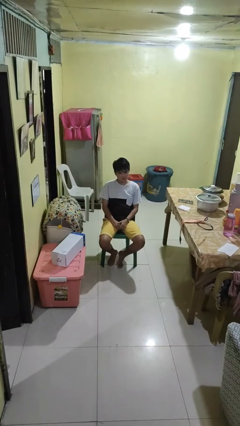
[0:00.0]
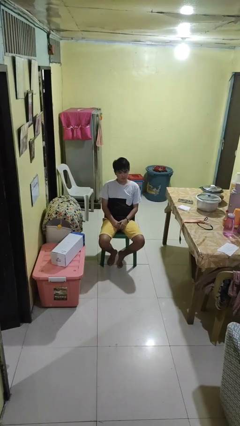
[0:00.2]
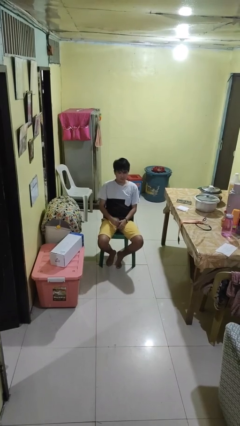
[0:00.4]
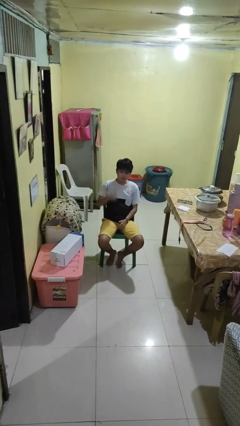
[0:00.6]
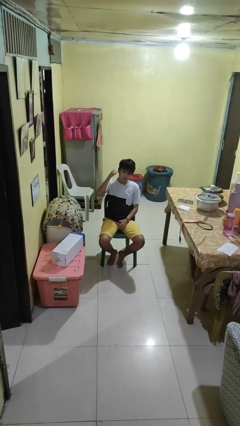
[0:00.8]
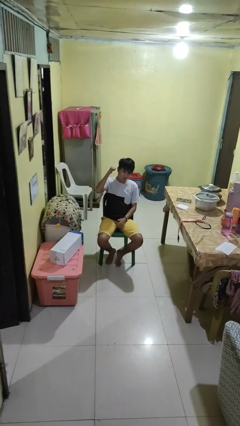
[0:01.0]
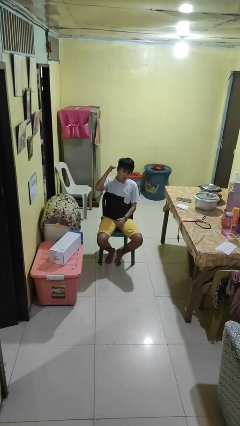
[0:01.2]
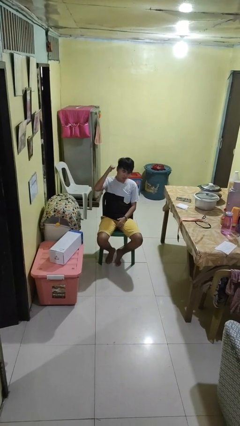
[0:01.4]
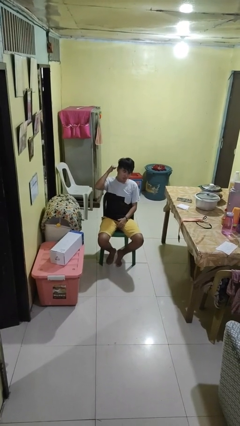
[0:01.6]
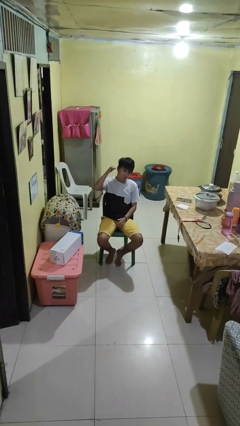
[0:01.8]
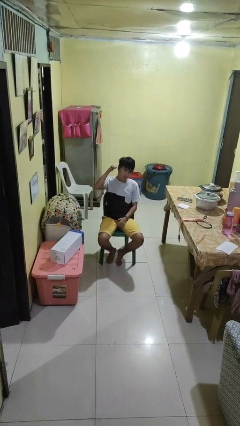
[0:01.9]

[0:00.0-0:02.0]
person gestures behind me

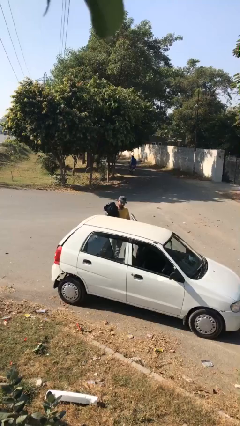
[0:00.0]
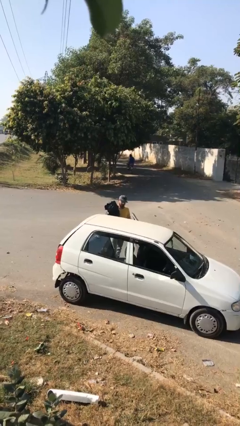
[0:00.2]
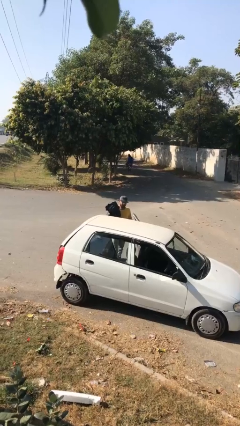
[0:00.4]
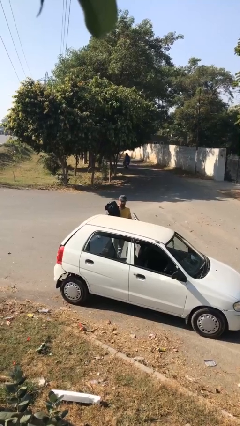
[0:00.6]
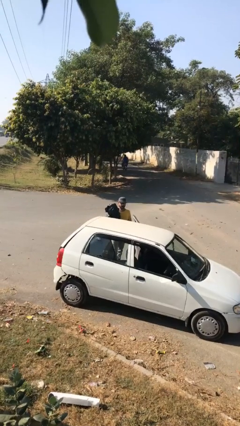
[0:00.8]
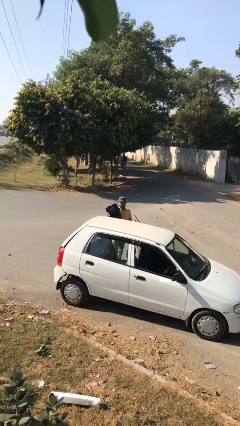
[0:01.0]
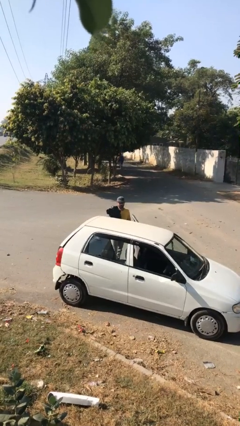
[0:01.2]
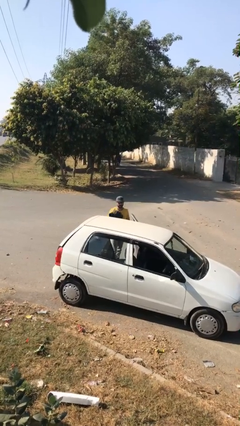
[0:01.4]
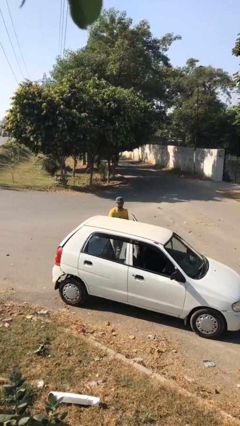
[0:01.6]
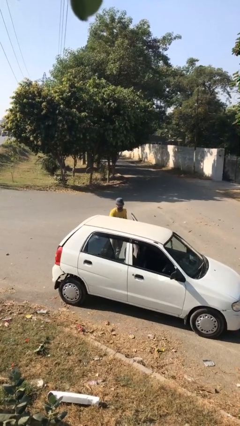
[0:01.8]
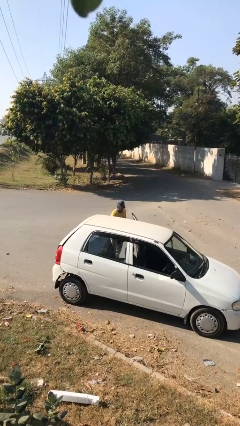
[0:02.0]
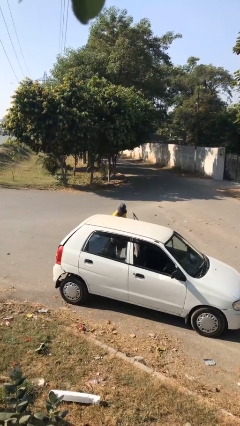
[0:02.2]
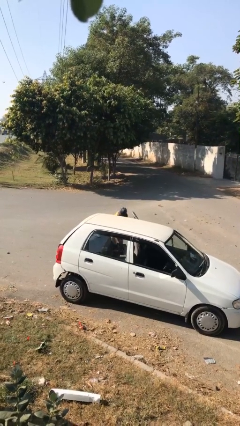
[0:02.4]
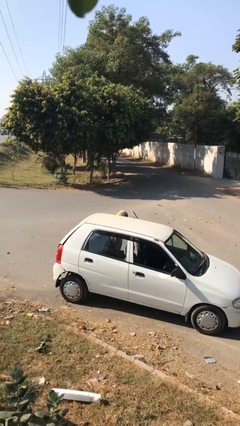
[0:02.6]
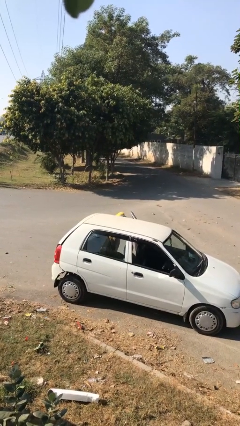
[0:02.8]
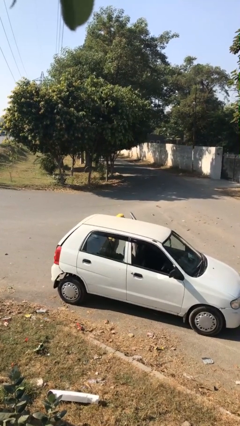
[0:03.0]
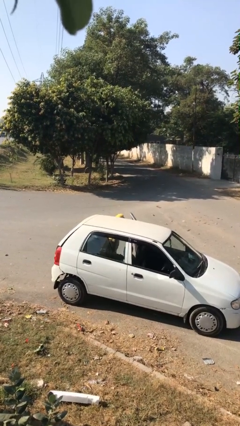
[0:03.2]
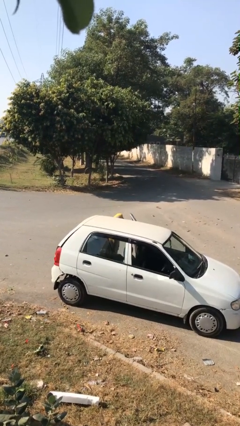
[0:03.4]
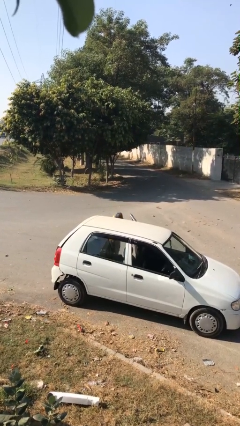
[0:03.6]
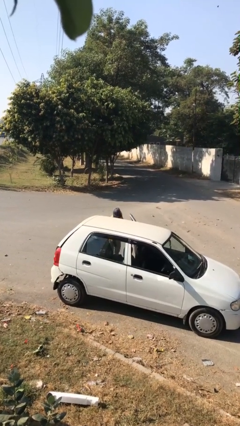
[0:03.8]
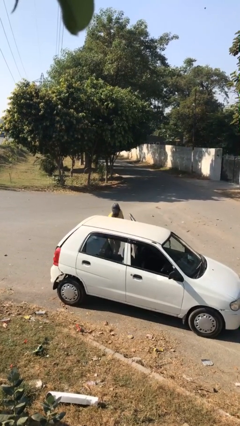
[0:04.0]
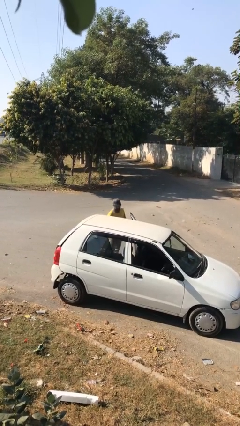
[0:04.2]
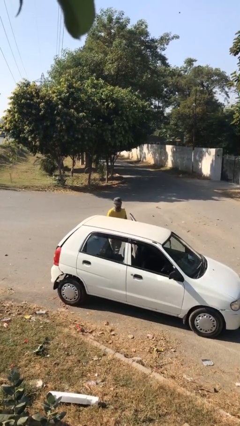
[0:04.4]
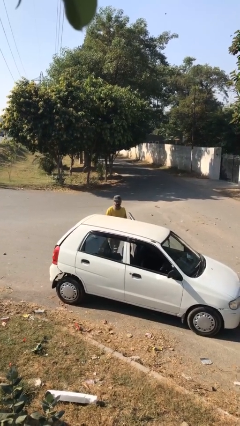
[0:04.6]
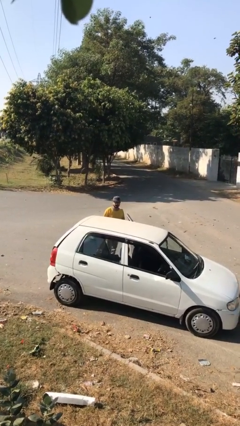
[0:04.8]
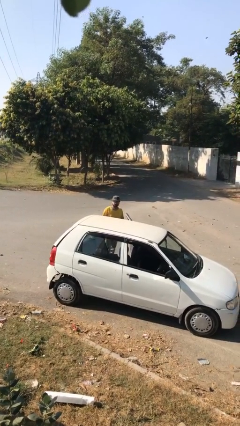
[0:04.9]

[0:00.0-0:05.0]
person loads car

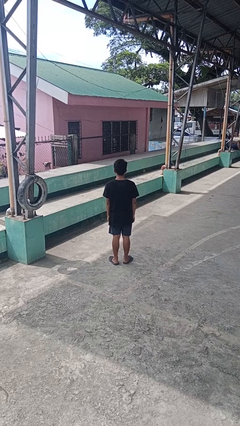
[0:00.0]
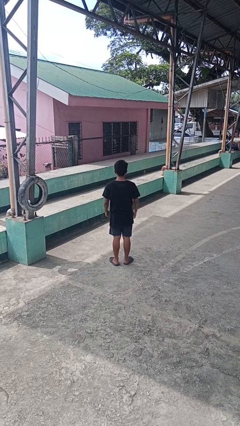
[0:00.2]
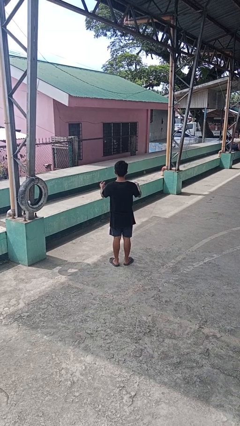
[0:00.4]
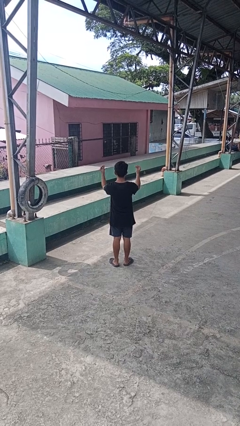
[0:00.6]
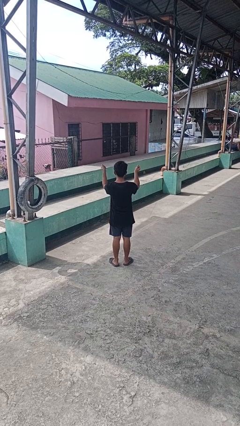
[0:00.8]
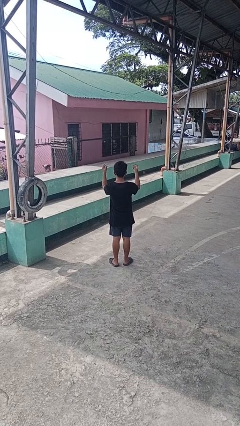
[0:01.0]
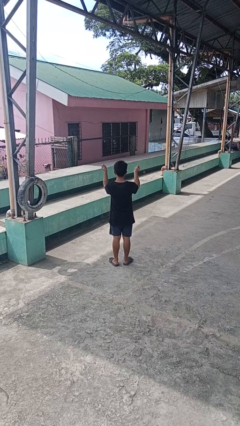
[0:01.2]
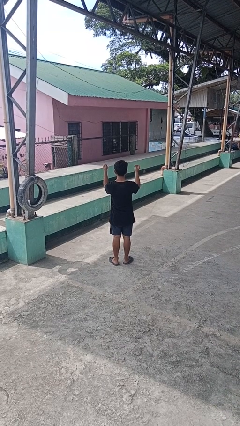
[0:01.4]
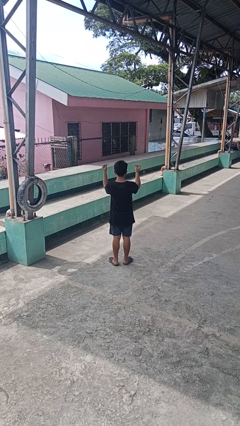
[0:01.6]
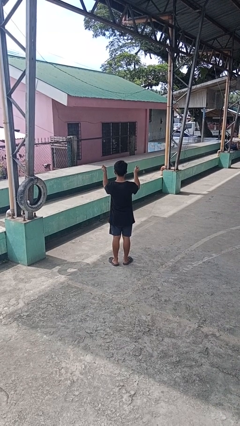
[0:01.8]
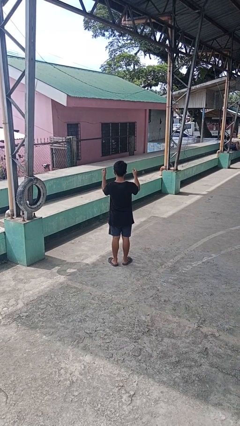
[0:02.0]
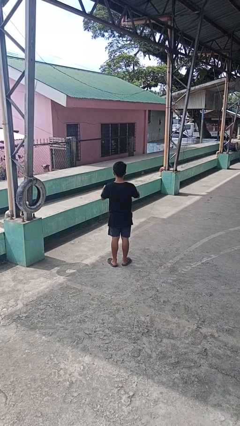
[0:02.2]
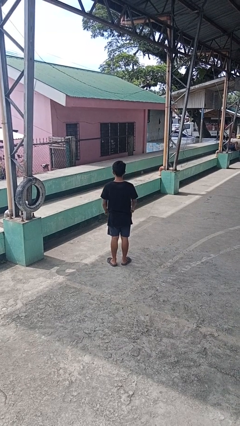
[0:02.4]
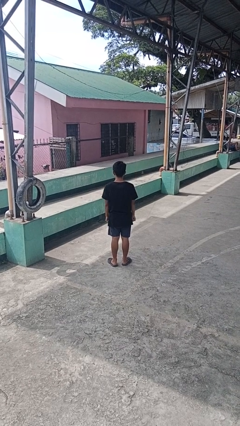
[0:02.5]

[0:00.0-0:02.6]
person snaps fingers

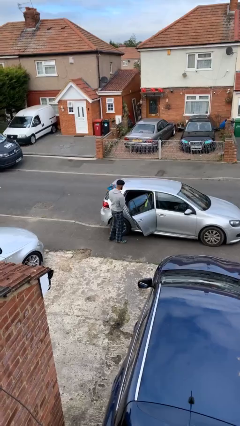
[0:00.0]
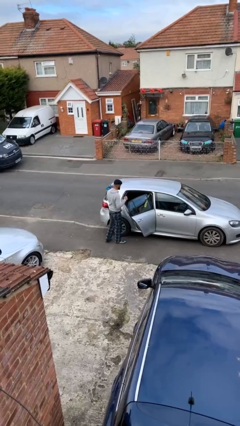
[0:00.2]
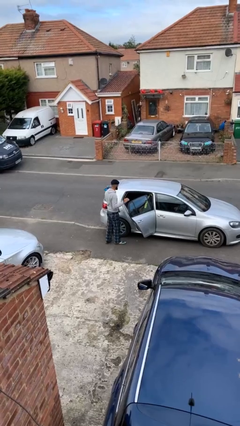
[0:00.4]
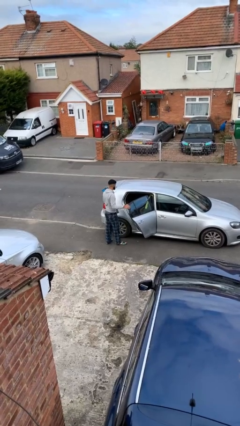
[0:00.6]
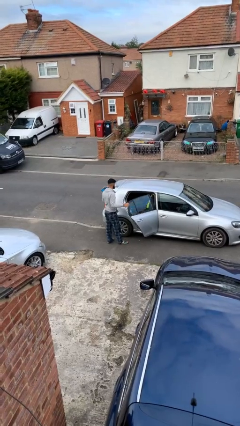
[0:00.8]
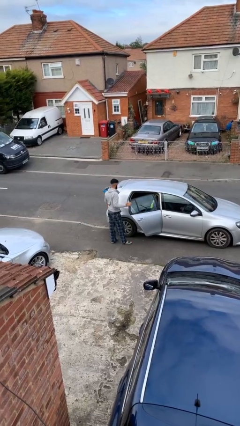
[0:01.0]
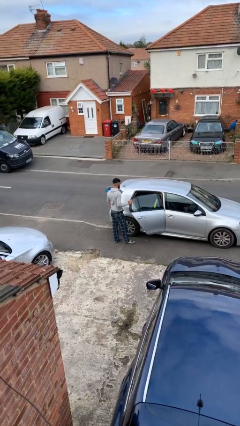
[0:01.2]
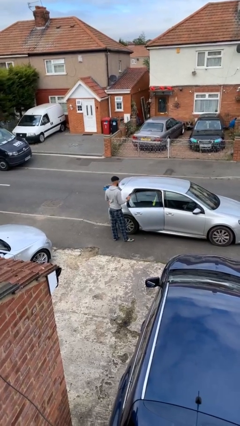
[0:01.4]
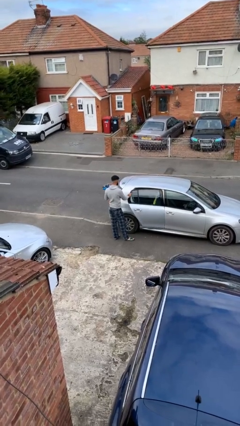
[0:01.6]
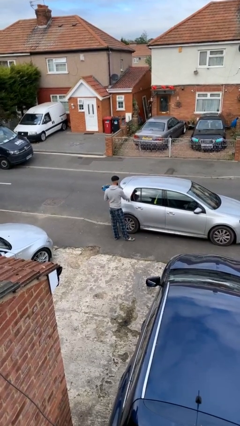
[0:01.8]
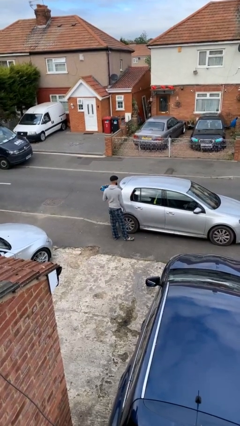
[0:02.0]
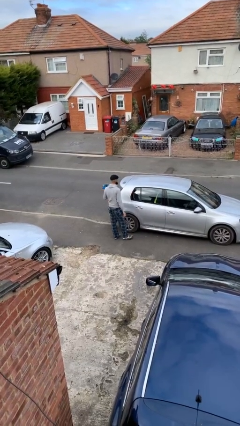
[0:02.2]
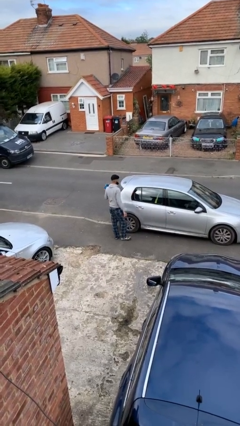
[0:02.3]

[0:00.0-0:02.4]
person closes car door

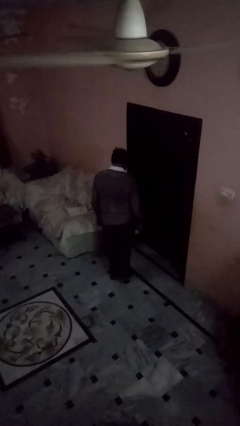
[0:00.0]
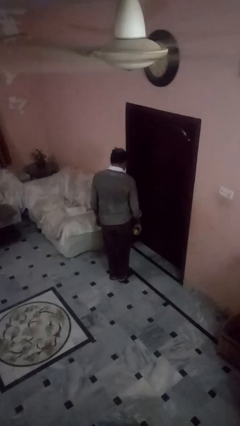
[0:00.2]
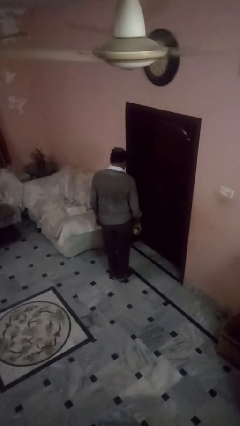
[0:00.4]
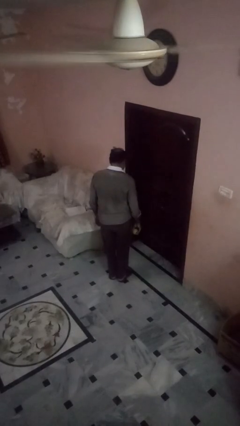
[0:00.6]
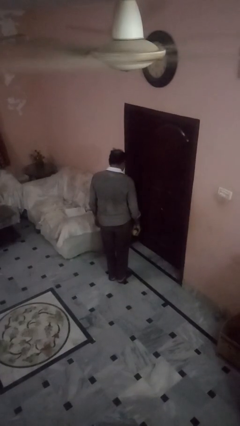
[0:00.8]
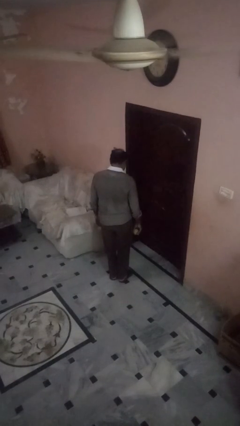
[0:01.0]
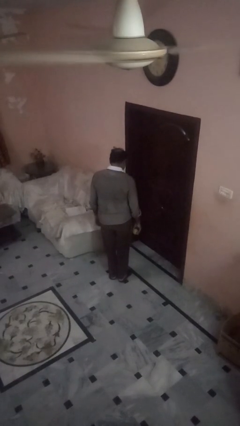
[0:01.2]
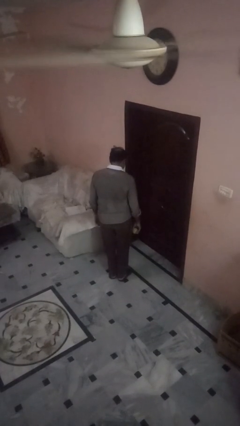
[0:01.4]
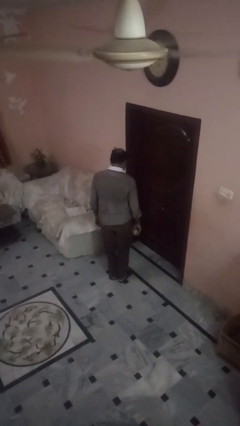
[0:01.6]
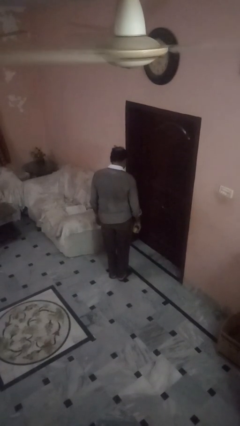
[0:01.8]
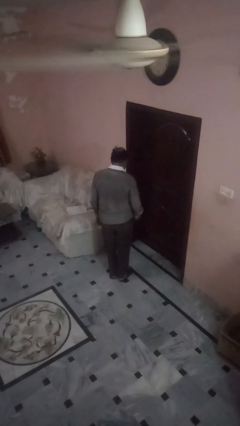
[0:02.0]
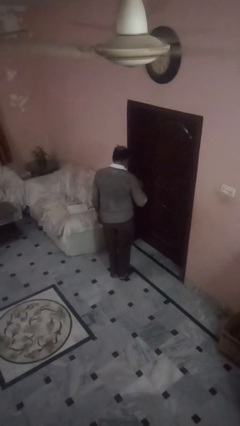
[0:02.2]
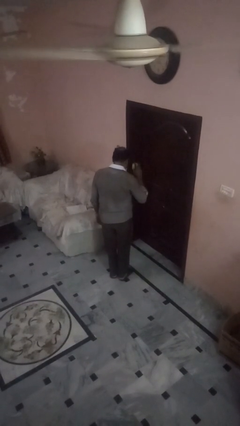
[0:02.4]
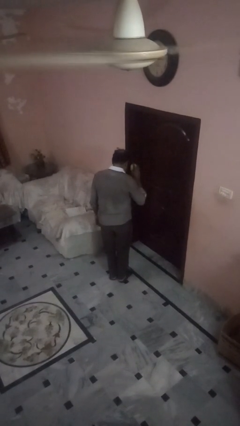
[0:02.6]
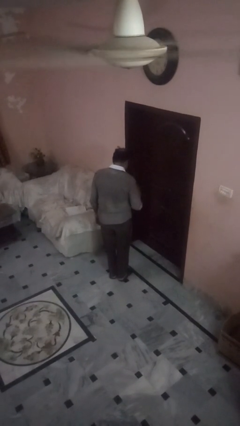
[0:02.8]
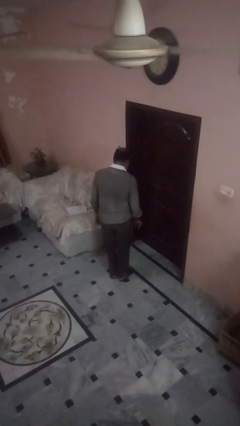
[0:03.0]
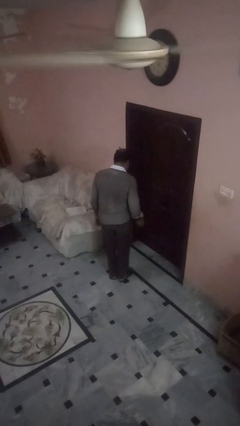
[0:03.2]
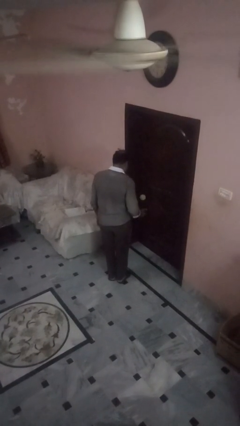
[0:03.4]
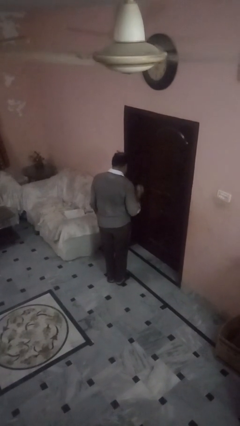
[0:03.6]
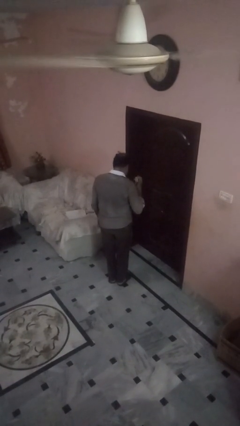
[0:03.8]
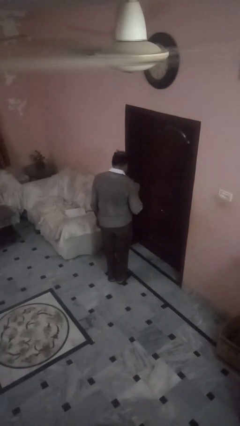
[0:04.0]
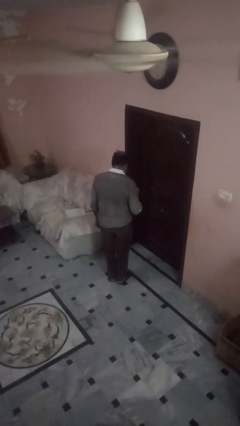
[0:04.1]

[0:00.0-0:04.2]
person bounces ball on floor

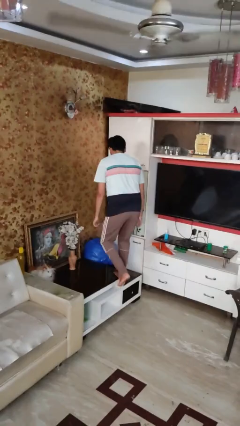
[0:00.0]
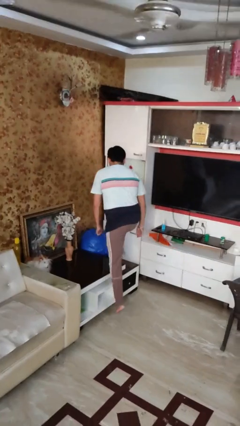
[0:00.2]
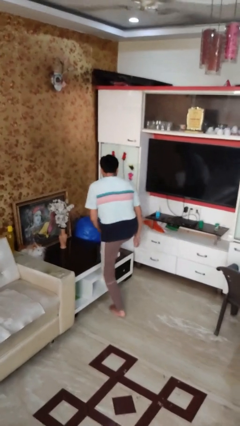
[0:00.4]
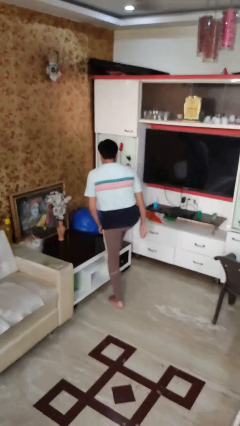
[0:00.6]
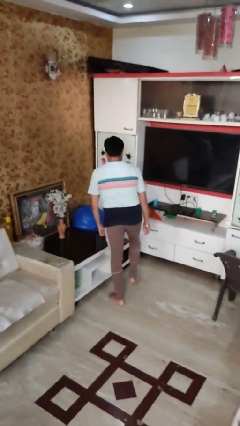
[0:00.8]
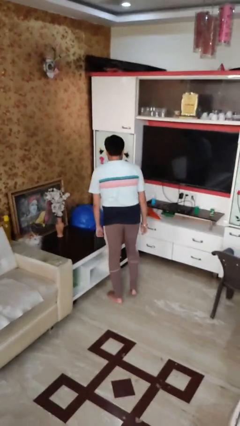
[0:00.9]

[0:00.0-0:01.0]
person climbs off table

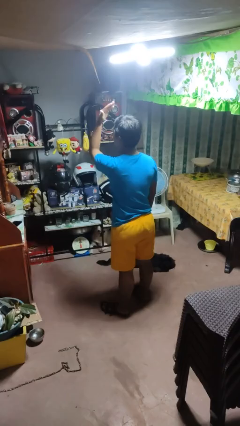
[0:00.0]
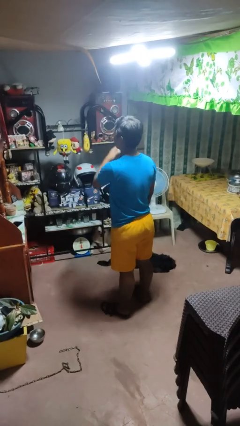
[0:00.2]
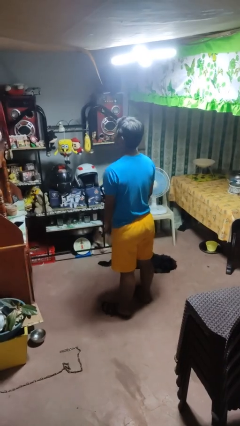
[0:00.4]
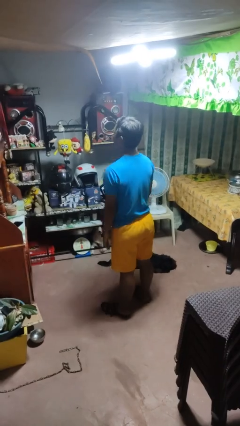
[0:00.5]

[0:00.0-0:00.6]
person gestures swipe up
